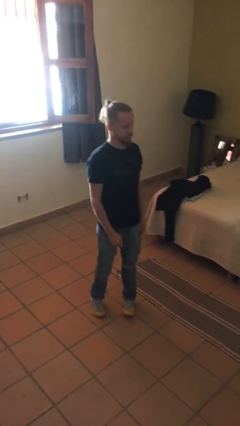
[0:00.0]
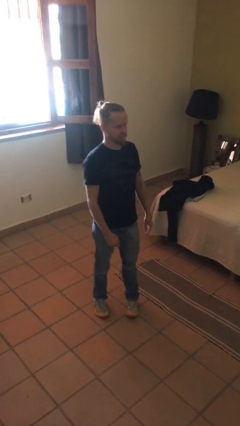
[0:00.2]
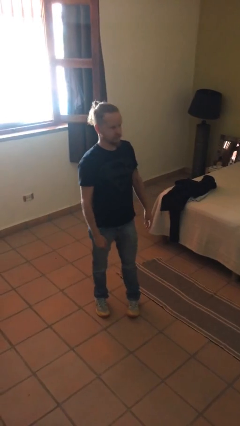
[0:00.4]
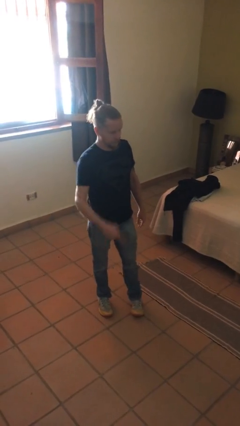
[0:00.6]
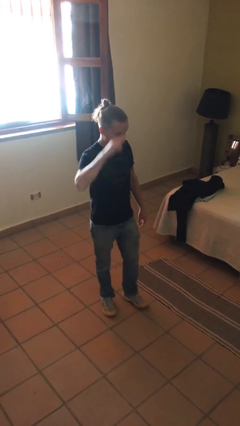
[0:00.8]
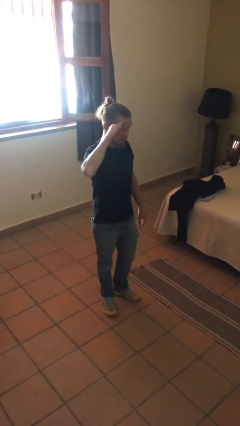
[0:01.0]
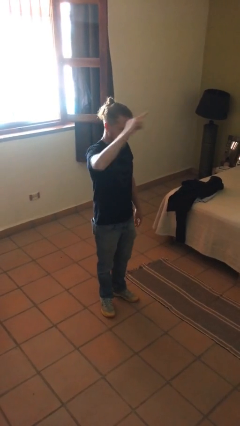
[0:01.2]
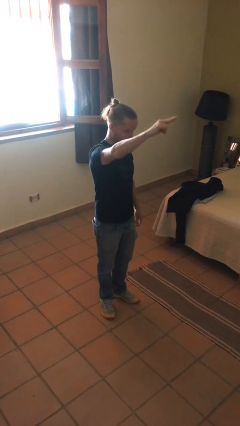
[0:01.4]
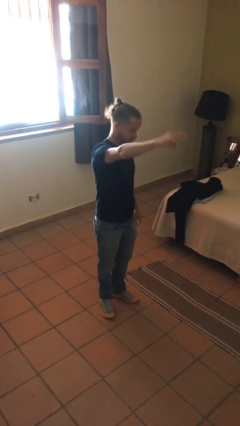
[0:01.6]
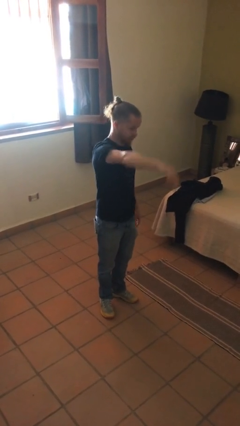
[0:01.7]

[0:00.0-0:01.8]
person salutes

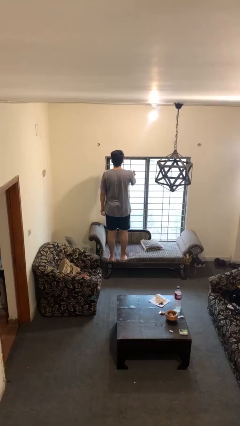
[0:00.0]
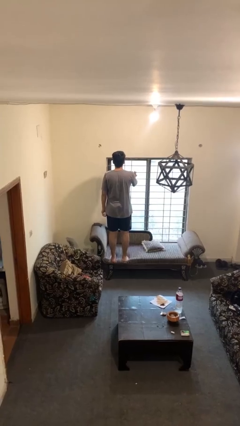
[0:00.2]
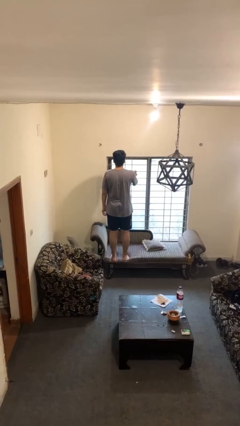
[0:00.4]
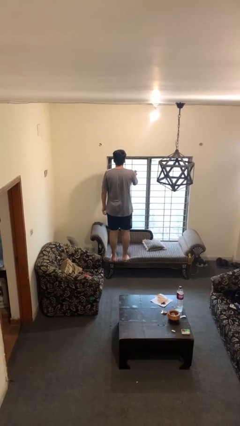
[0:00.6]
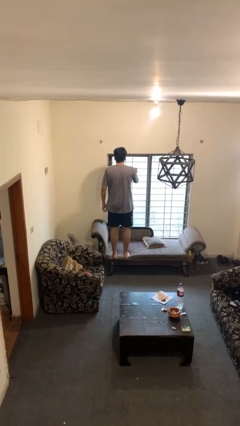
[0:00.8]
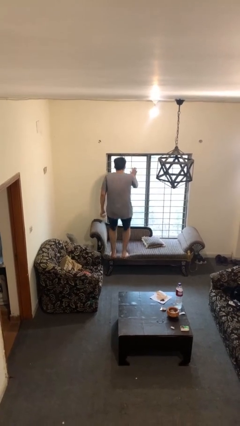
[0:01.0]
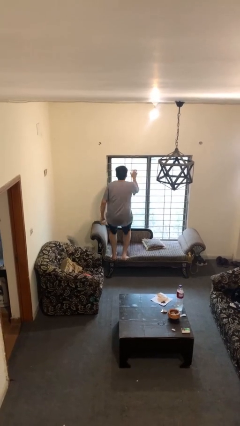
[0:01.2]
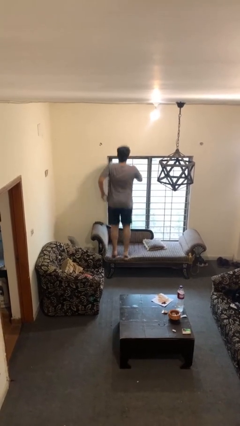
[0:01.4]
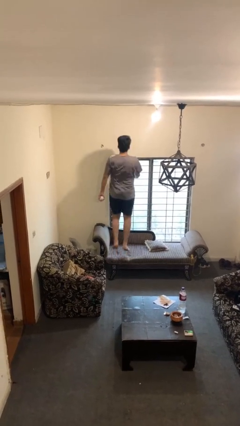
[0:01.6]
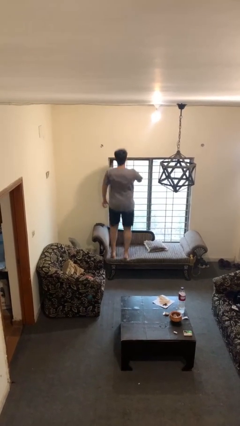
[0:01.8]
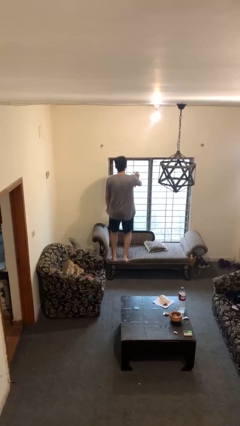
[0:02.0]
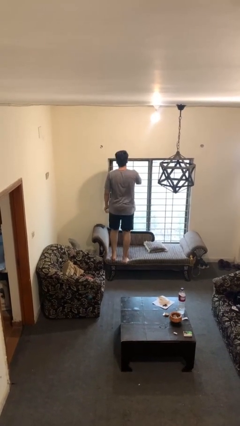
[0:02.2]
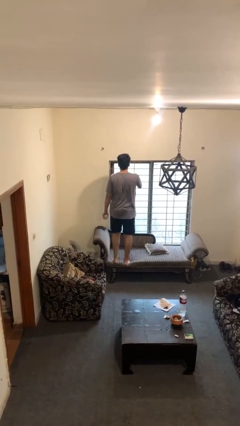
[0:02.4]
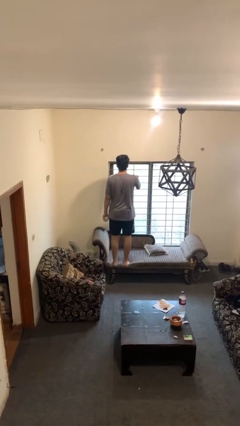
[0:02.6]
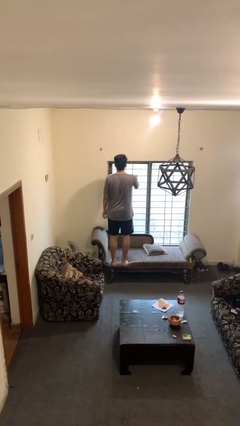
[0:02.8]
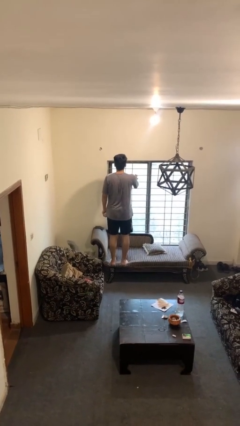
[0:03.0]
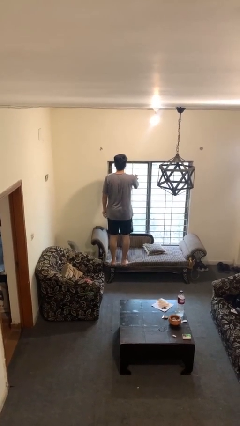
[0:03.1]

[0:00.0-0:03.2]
person jumps on couch

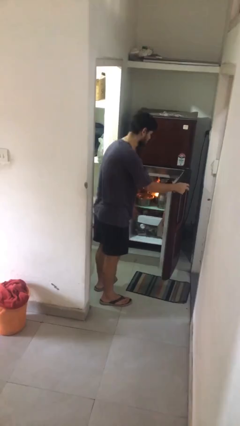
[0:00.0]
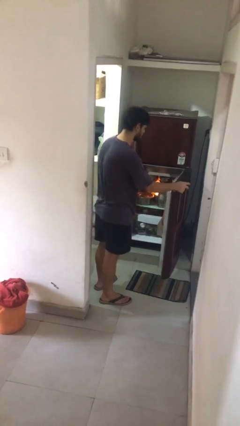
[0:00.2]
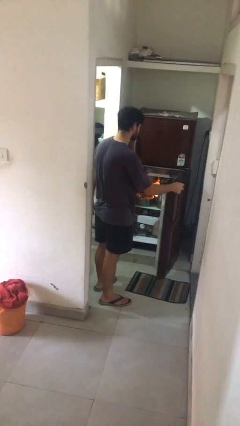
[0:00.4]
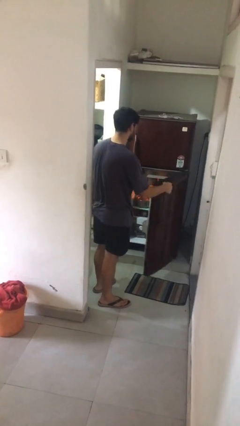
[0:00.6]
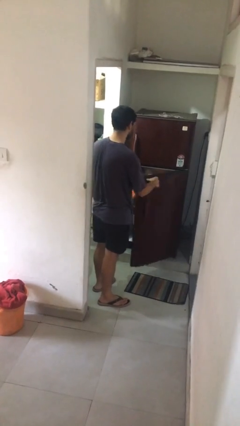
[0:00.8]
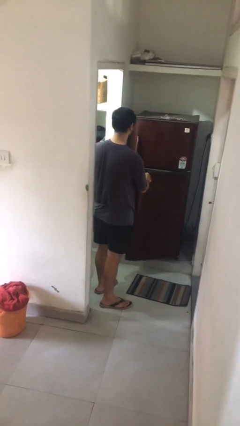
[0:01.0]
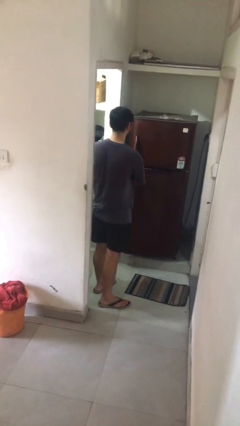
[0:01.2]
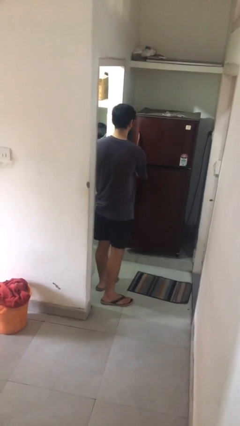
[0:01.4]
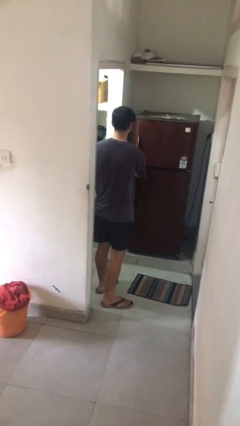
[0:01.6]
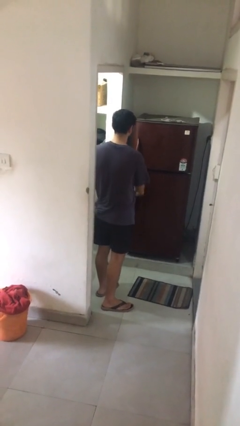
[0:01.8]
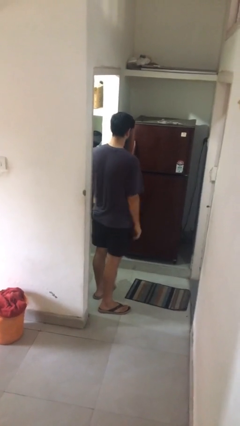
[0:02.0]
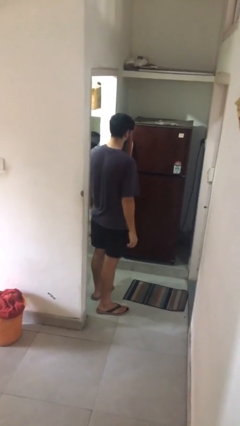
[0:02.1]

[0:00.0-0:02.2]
person closes refrigerator

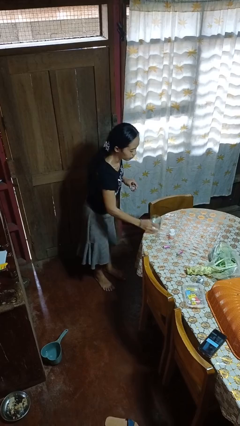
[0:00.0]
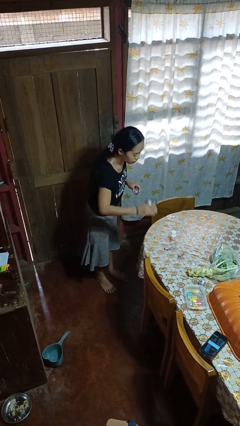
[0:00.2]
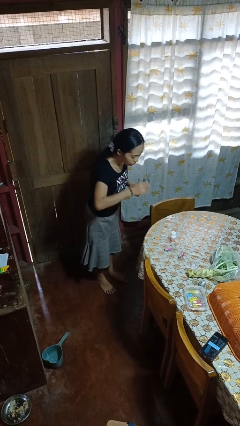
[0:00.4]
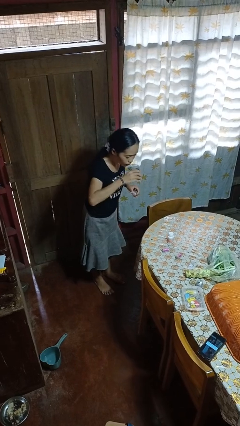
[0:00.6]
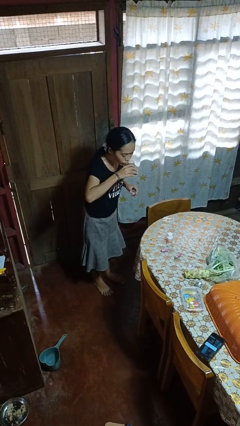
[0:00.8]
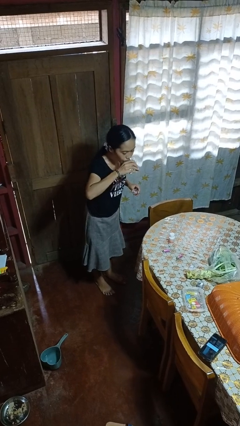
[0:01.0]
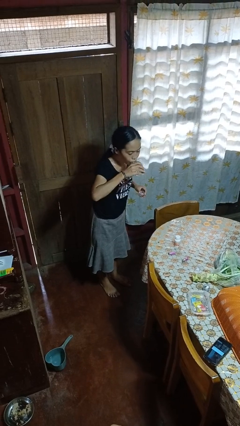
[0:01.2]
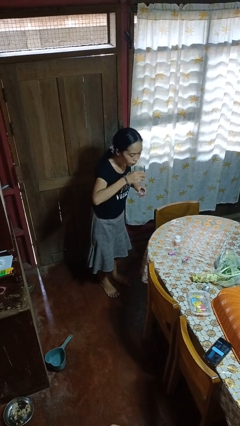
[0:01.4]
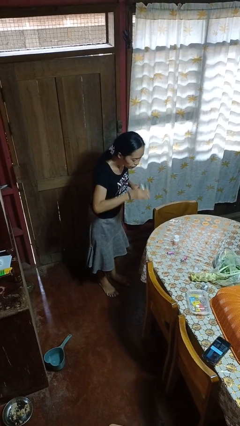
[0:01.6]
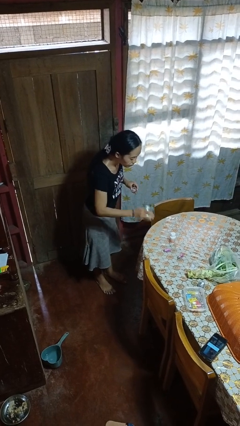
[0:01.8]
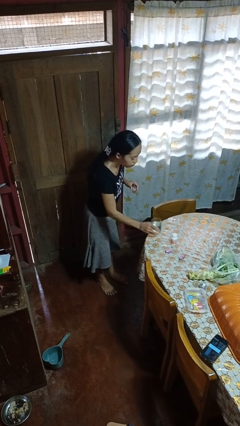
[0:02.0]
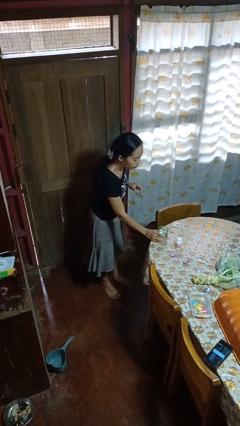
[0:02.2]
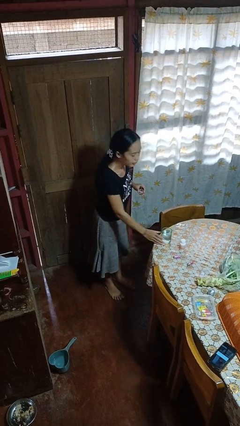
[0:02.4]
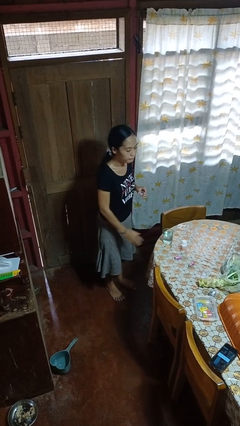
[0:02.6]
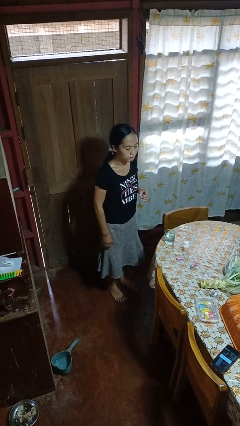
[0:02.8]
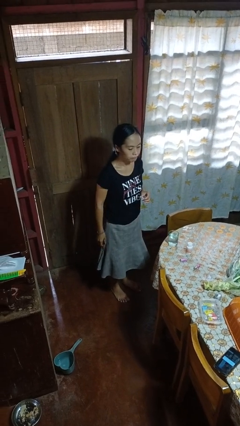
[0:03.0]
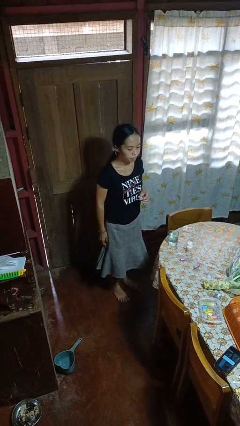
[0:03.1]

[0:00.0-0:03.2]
person drinks from cup

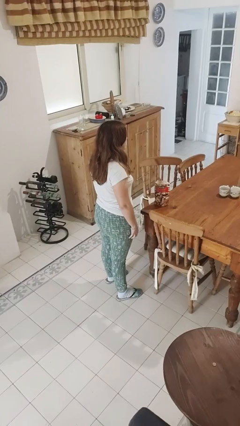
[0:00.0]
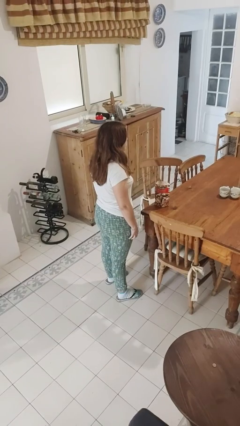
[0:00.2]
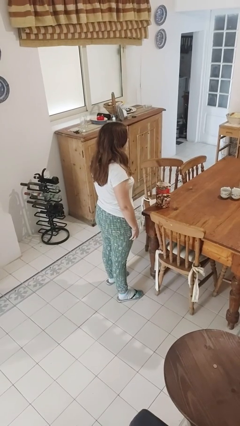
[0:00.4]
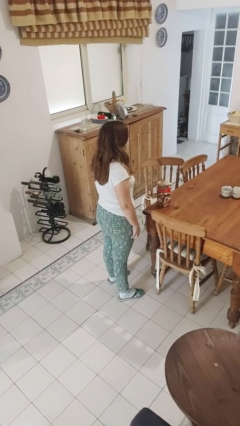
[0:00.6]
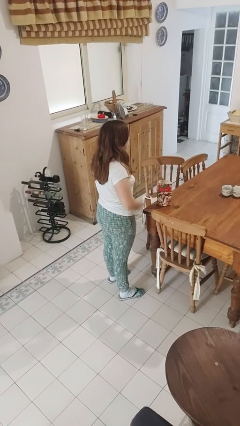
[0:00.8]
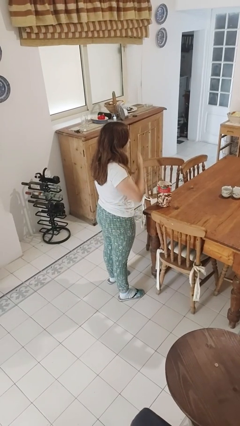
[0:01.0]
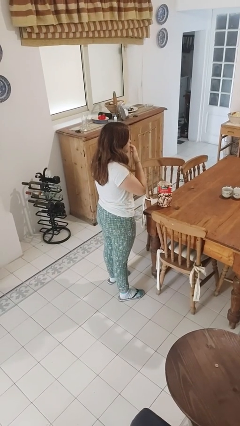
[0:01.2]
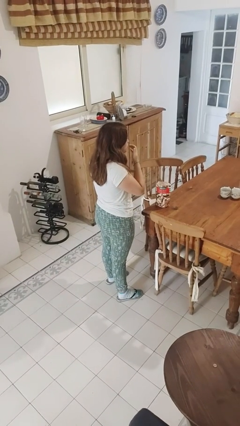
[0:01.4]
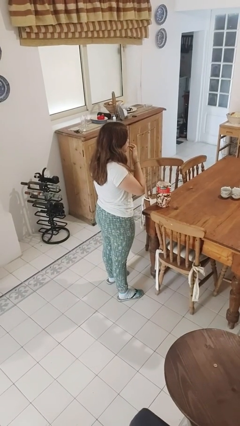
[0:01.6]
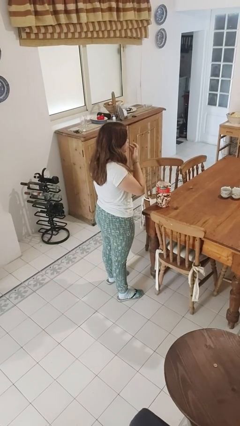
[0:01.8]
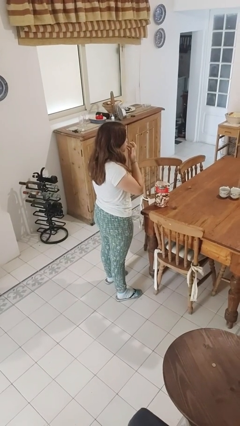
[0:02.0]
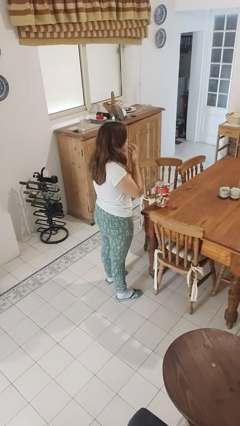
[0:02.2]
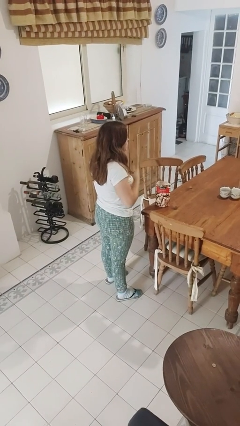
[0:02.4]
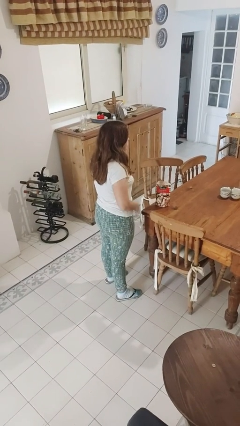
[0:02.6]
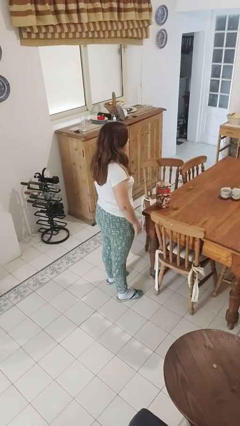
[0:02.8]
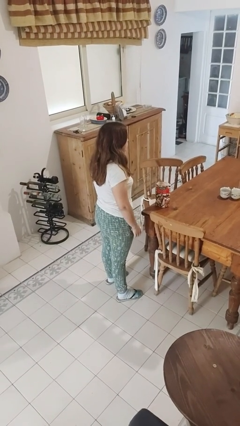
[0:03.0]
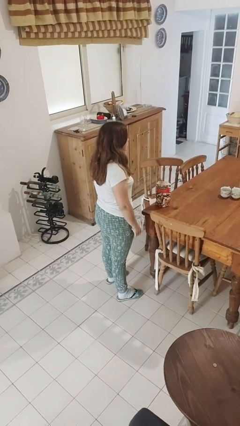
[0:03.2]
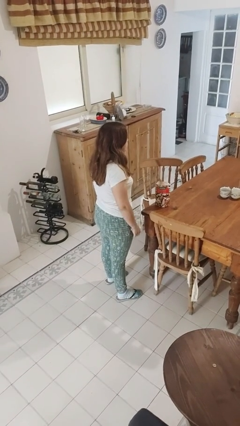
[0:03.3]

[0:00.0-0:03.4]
person licks fingers

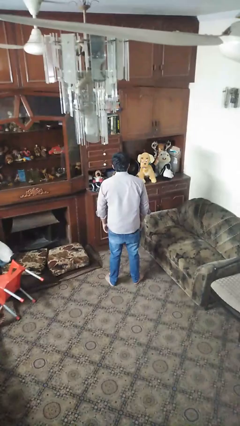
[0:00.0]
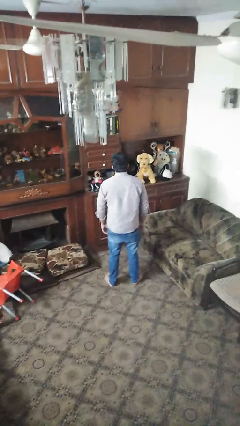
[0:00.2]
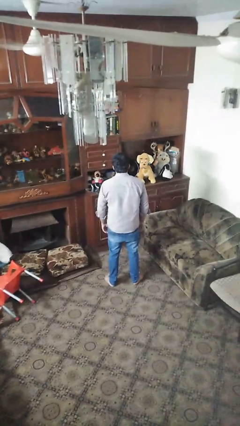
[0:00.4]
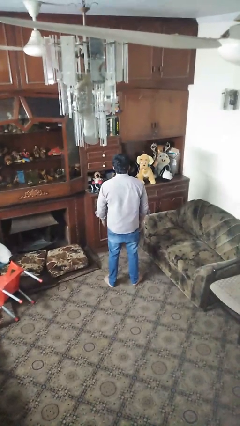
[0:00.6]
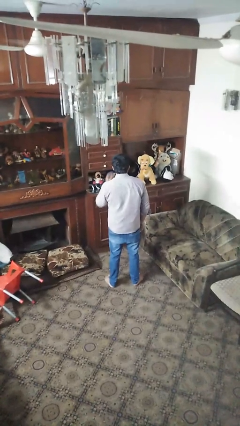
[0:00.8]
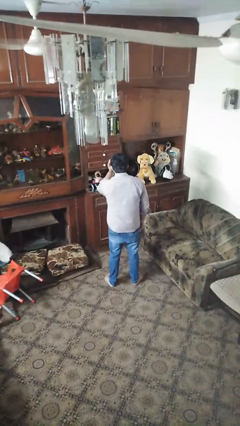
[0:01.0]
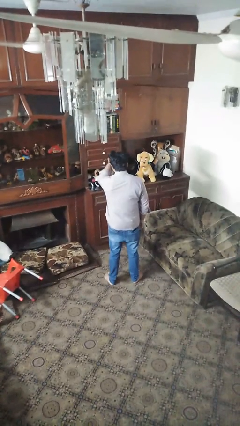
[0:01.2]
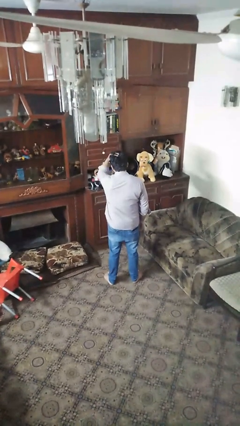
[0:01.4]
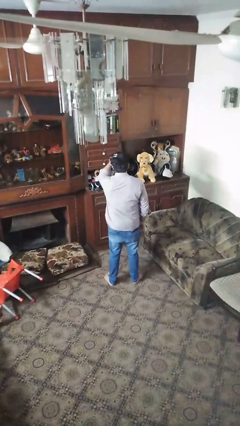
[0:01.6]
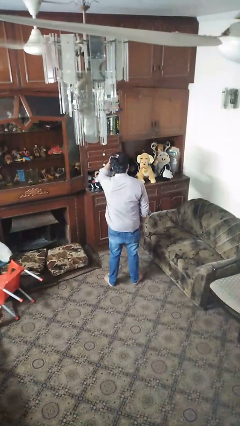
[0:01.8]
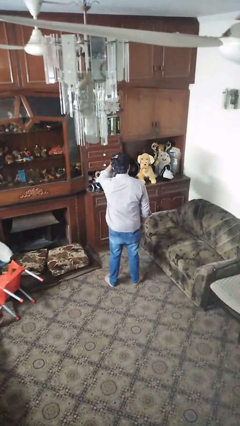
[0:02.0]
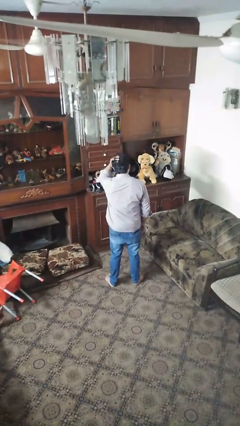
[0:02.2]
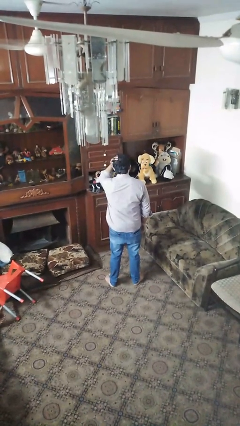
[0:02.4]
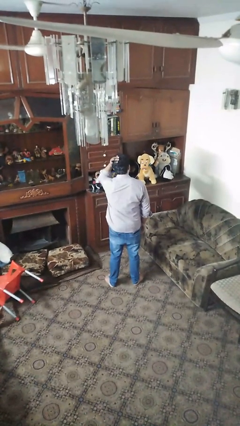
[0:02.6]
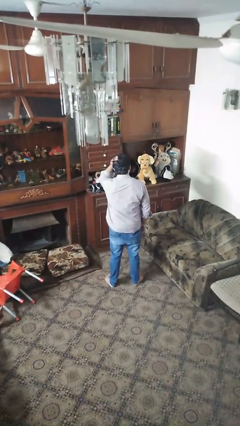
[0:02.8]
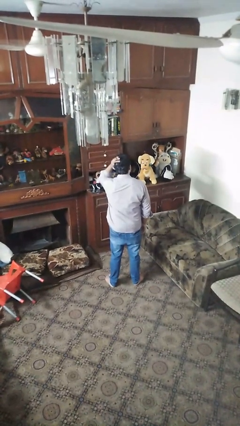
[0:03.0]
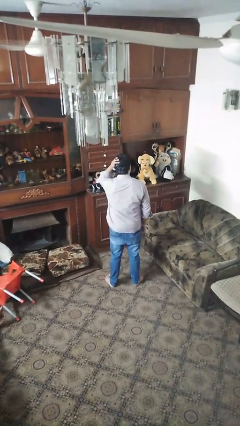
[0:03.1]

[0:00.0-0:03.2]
person strokes hair

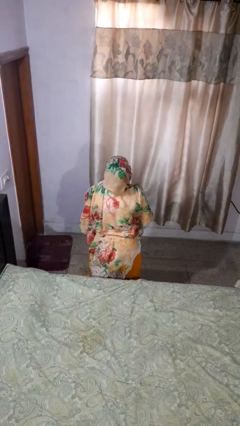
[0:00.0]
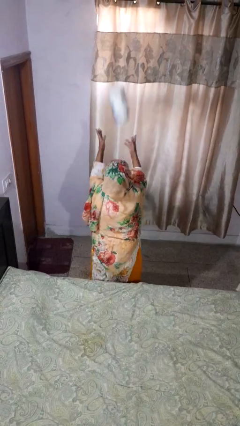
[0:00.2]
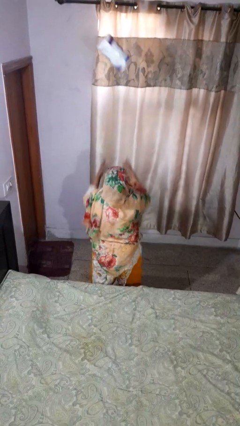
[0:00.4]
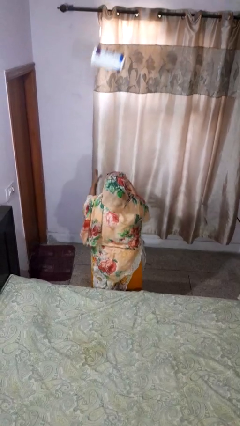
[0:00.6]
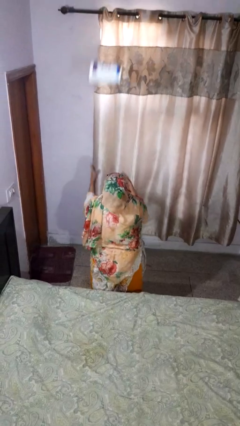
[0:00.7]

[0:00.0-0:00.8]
person drops object
